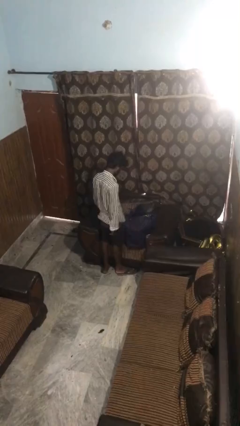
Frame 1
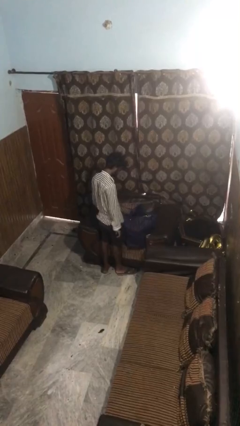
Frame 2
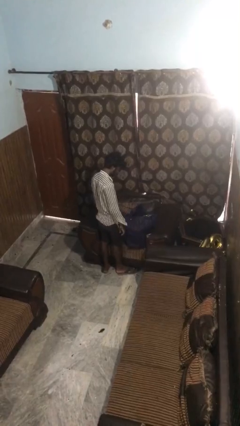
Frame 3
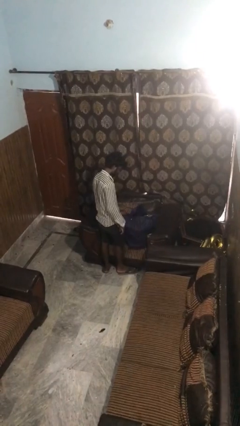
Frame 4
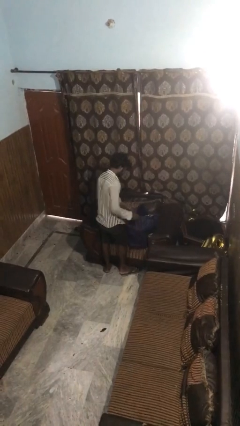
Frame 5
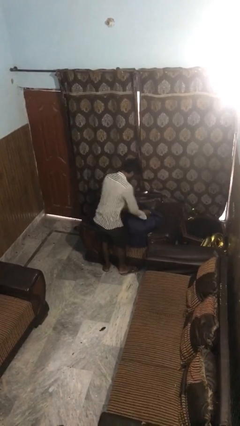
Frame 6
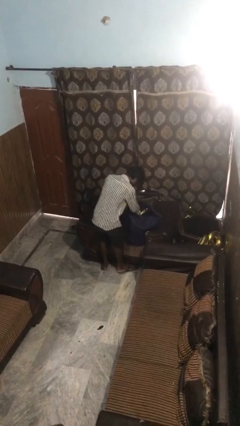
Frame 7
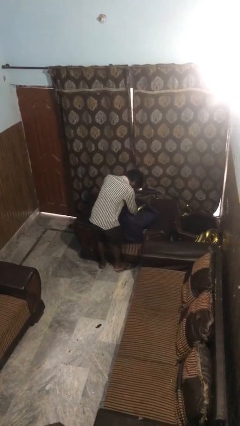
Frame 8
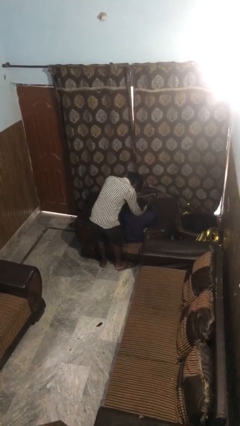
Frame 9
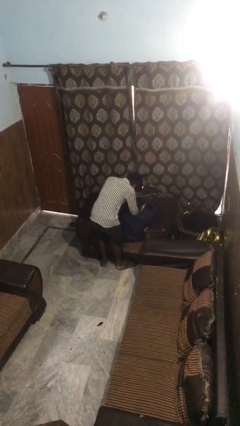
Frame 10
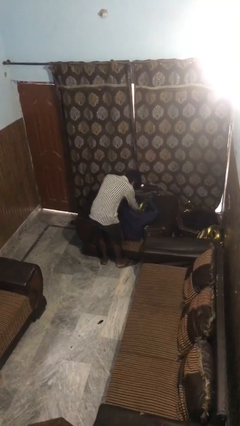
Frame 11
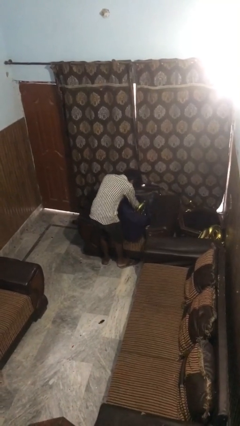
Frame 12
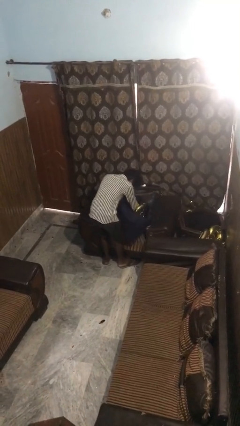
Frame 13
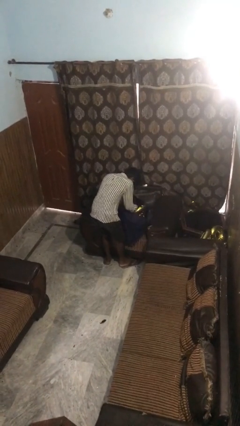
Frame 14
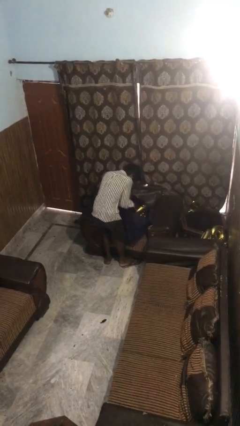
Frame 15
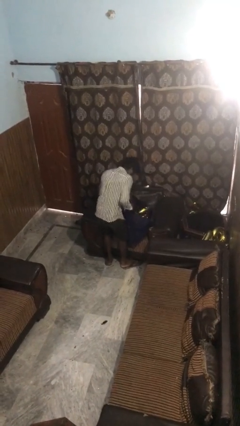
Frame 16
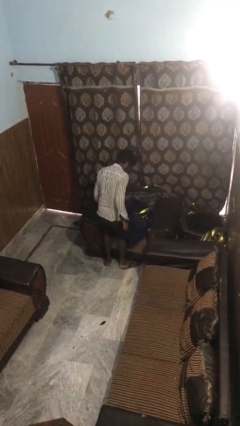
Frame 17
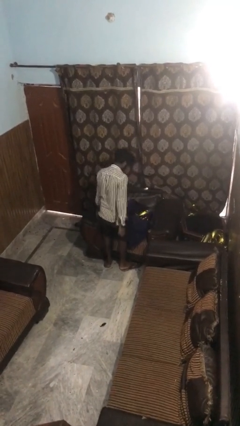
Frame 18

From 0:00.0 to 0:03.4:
person searches in bag

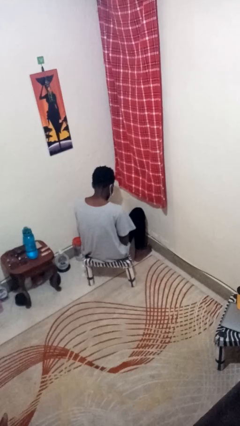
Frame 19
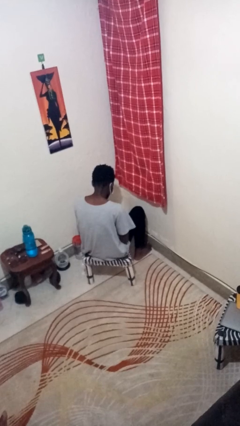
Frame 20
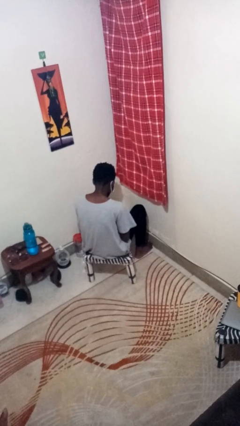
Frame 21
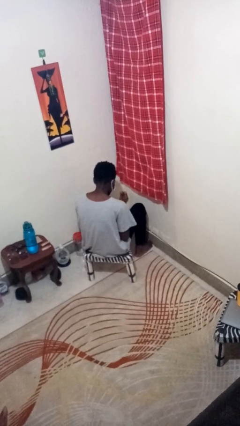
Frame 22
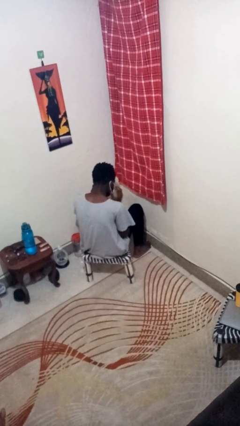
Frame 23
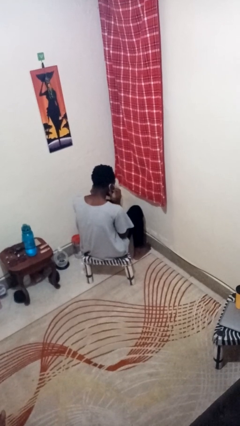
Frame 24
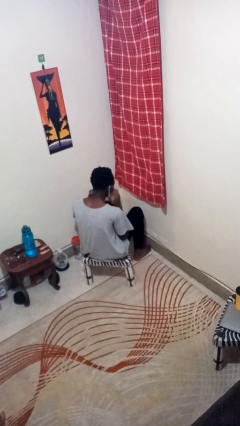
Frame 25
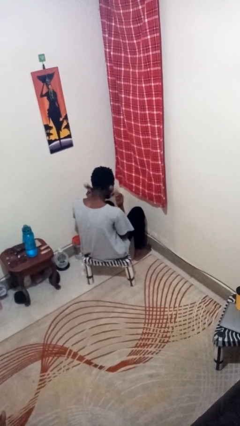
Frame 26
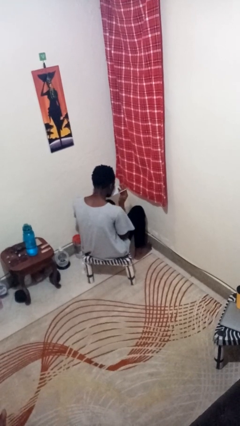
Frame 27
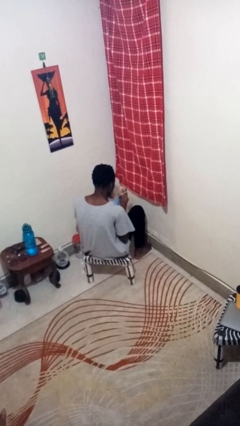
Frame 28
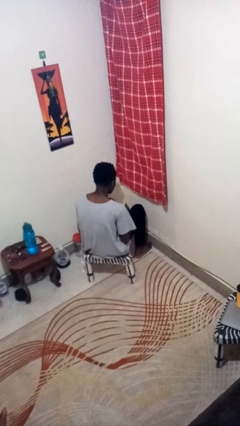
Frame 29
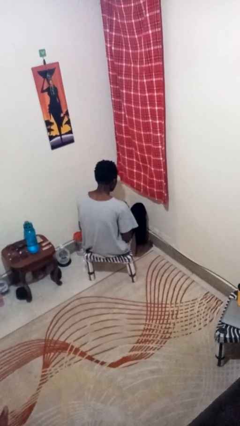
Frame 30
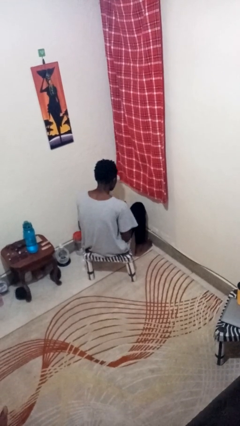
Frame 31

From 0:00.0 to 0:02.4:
person takes off facemask

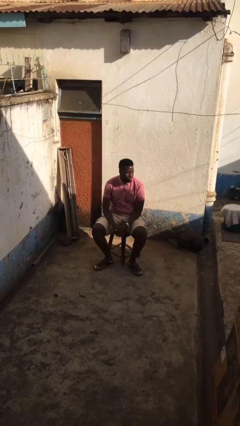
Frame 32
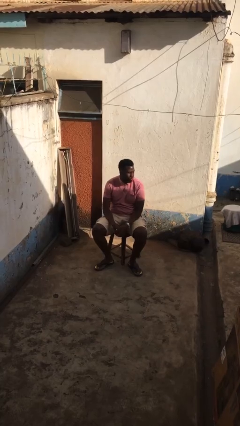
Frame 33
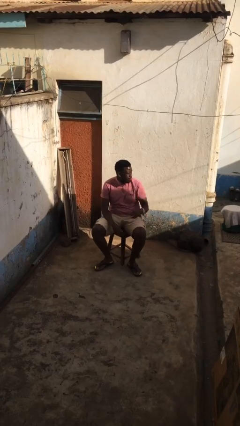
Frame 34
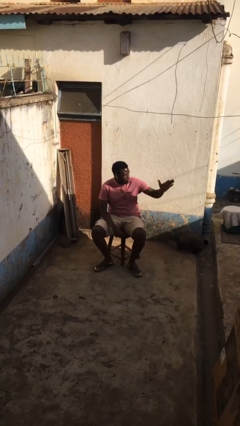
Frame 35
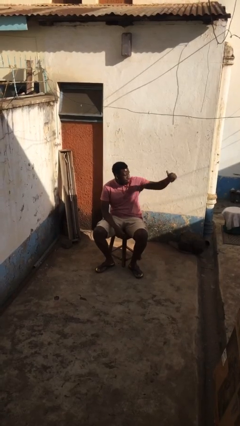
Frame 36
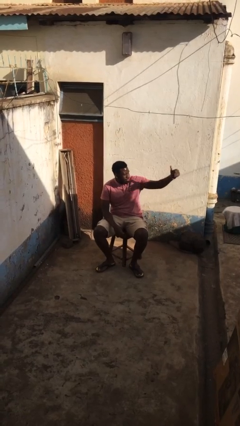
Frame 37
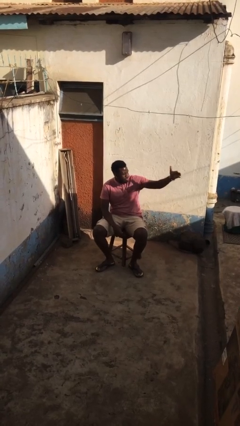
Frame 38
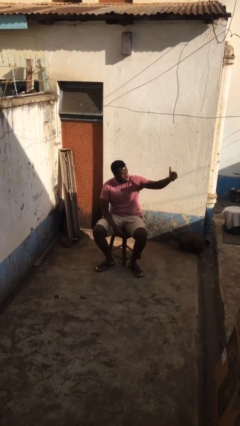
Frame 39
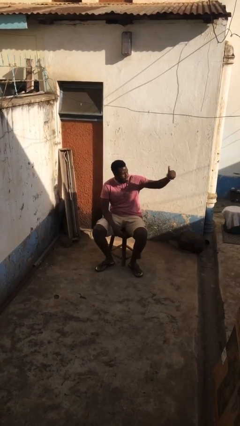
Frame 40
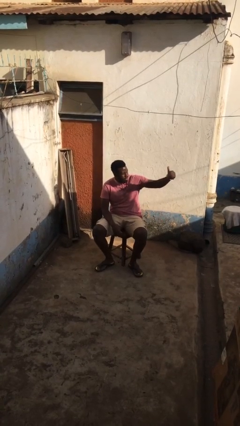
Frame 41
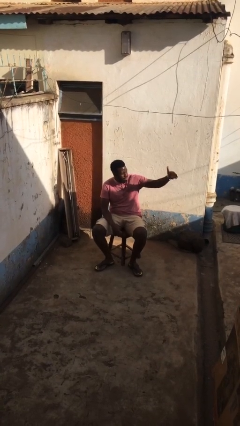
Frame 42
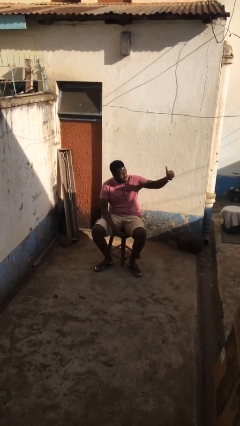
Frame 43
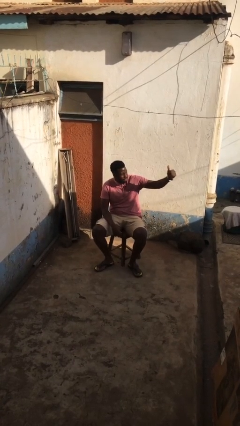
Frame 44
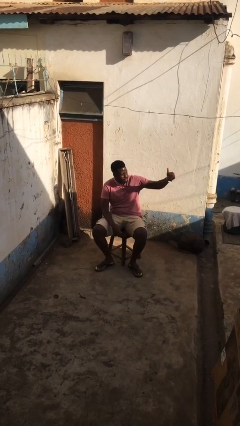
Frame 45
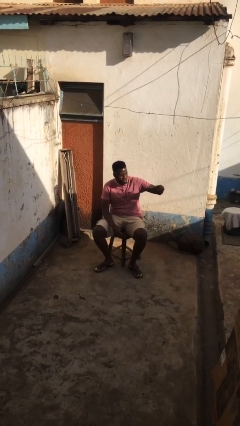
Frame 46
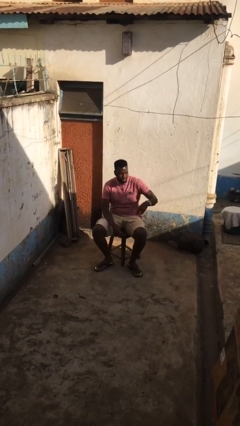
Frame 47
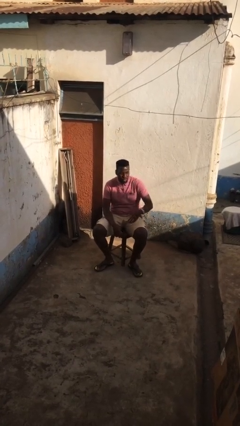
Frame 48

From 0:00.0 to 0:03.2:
person gestures come here

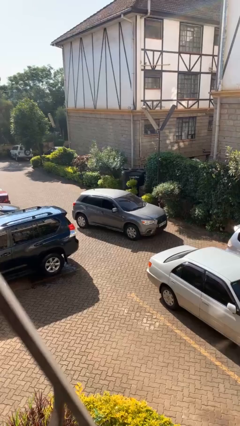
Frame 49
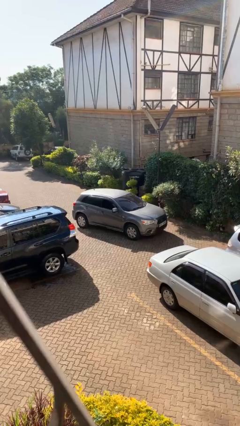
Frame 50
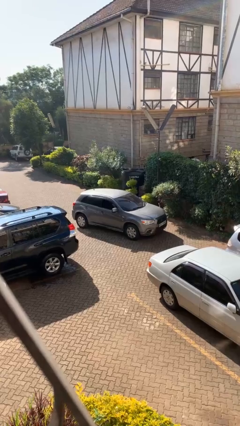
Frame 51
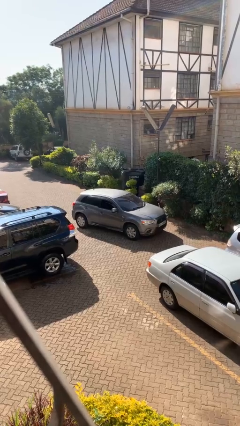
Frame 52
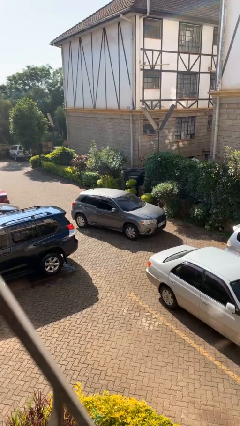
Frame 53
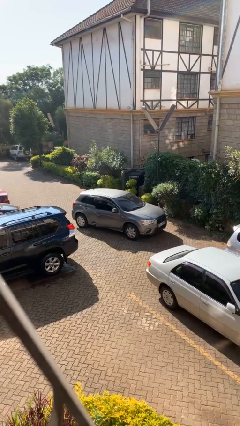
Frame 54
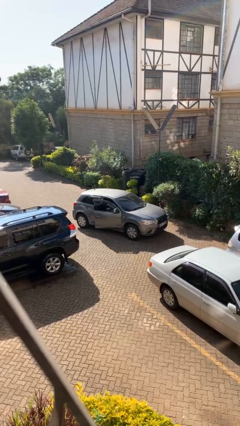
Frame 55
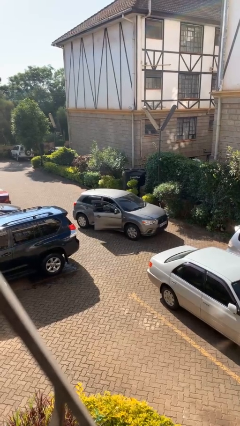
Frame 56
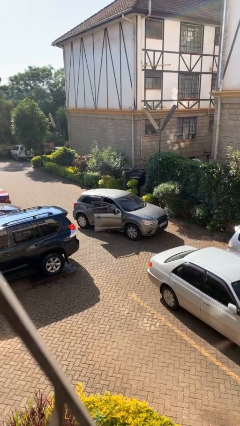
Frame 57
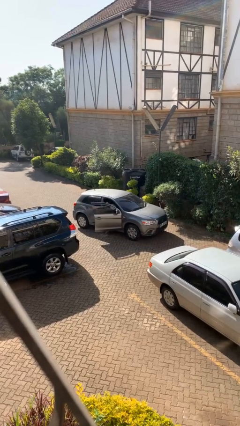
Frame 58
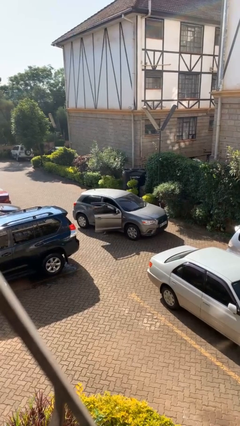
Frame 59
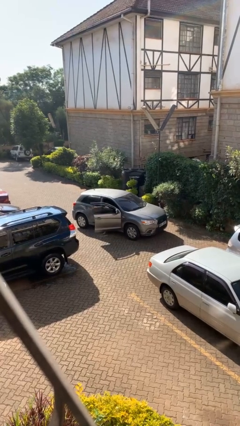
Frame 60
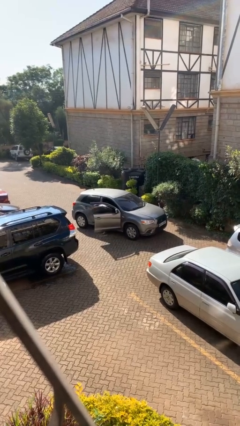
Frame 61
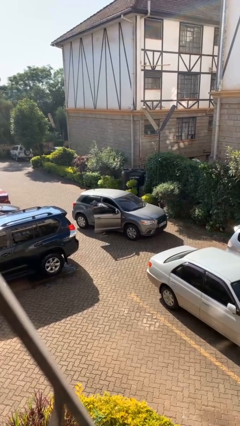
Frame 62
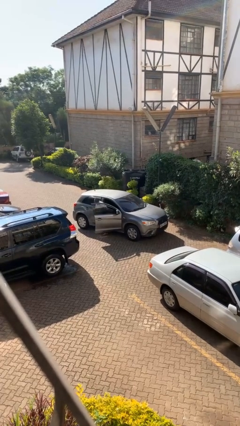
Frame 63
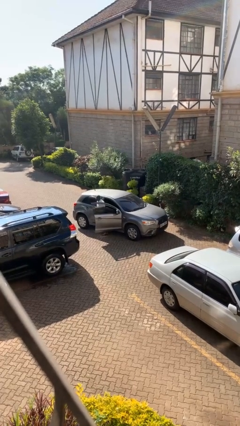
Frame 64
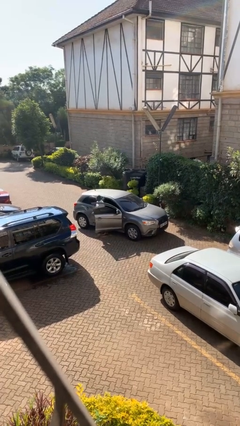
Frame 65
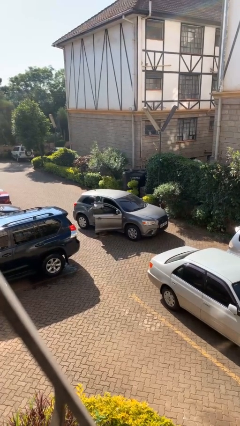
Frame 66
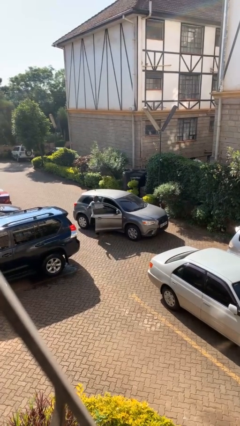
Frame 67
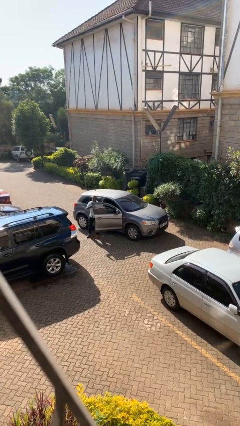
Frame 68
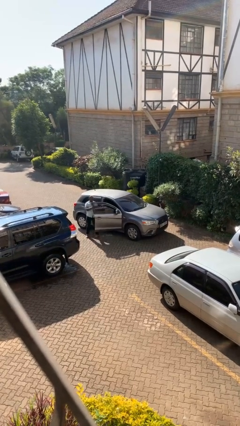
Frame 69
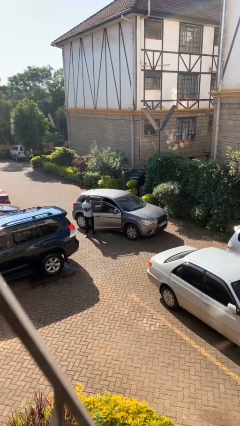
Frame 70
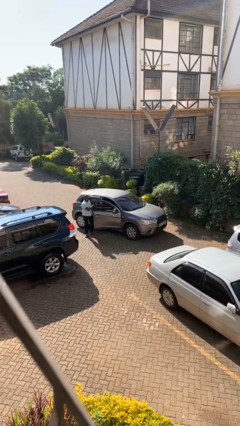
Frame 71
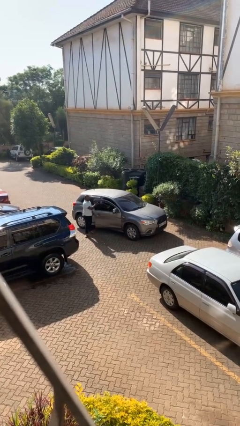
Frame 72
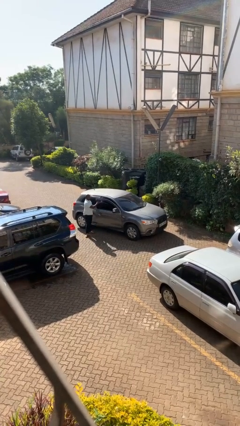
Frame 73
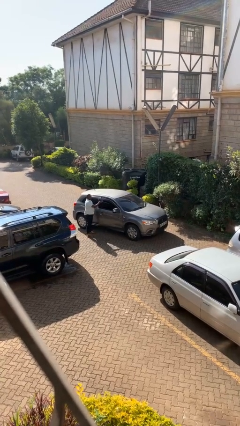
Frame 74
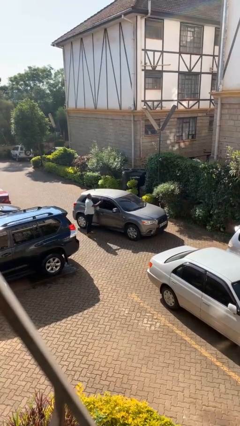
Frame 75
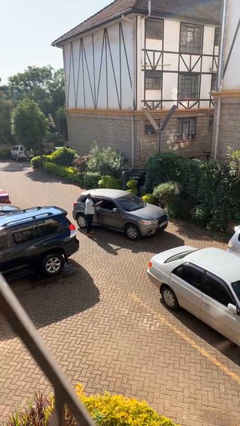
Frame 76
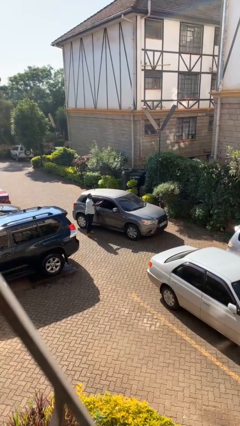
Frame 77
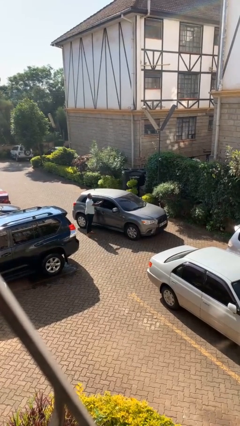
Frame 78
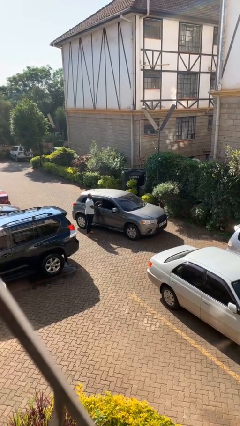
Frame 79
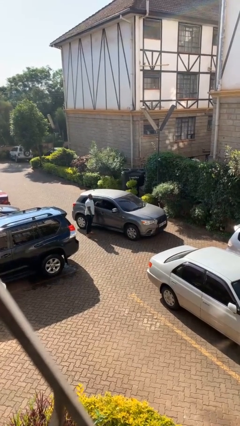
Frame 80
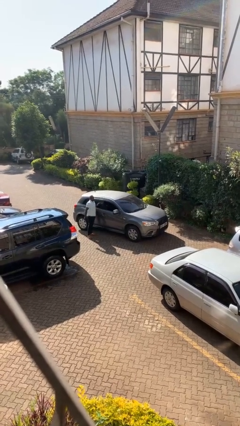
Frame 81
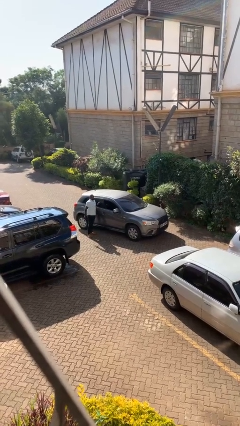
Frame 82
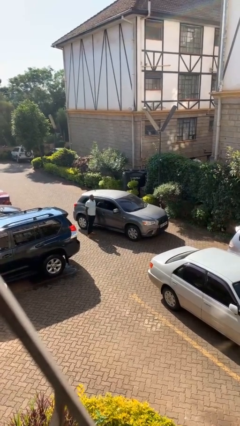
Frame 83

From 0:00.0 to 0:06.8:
car drops off person

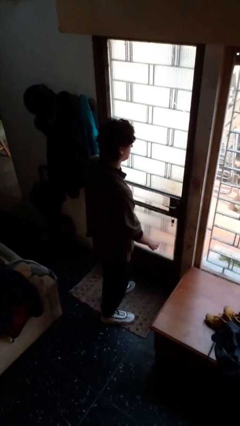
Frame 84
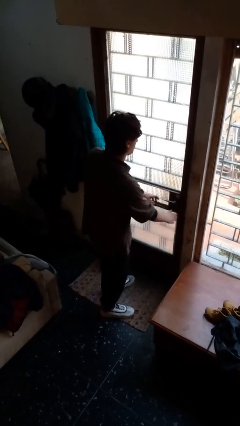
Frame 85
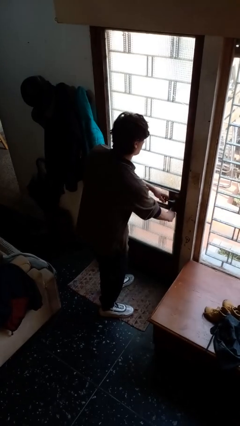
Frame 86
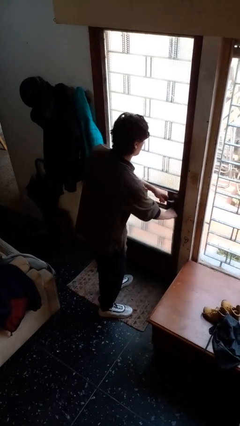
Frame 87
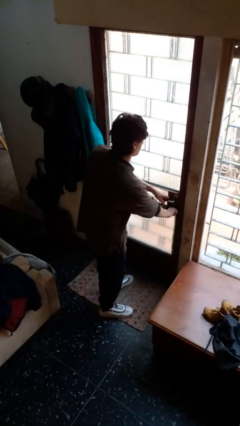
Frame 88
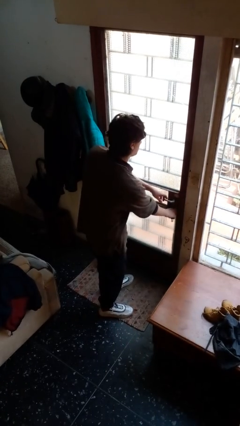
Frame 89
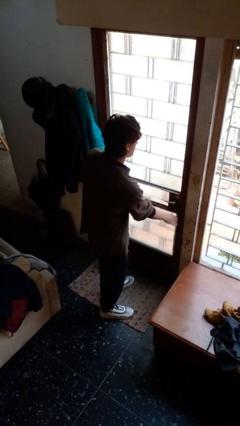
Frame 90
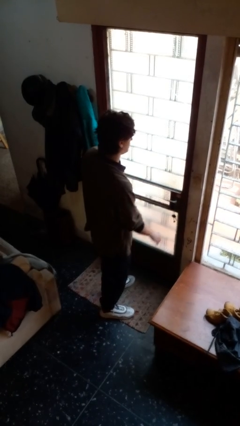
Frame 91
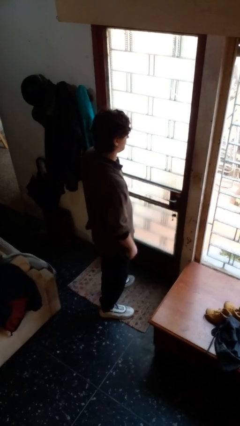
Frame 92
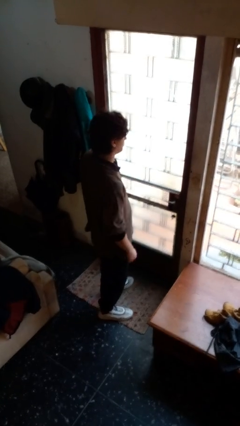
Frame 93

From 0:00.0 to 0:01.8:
person unlocks door with keys
